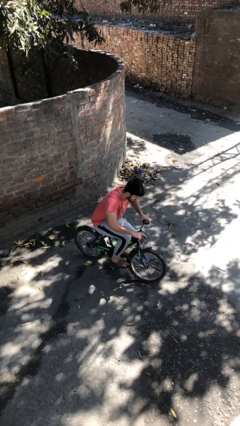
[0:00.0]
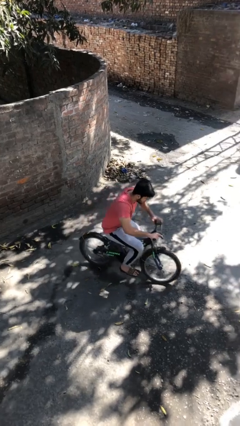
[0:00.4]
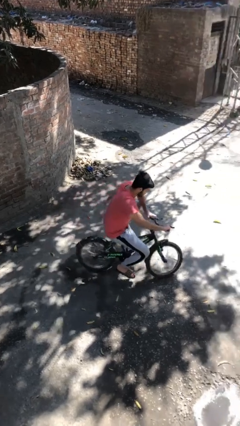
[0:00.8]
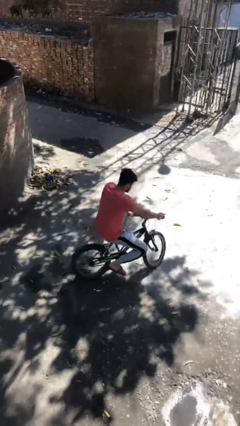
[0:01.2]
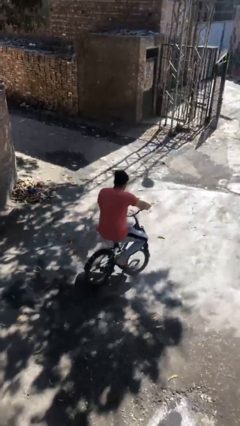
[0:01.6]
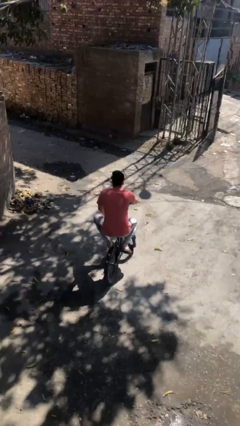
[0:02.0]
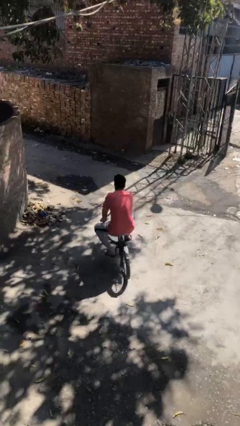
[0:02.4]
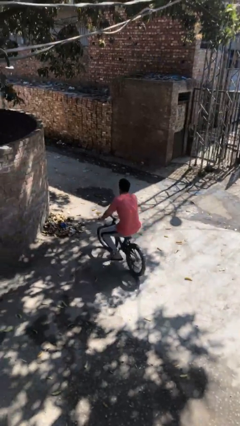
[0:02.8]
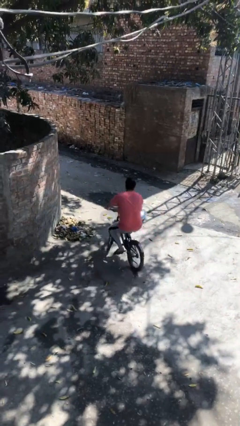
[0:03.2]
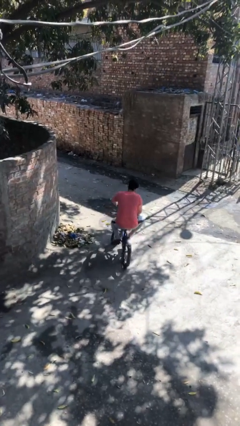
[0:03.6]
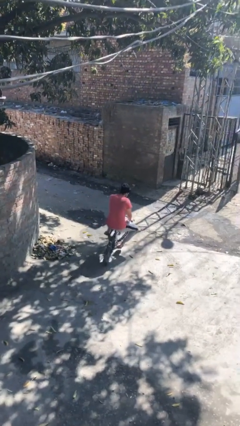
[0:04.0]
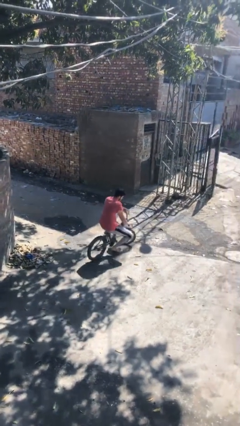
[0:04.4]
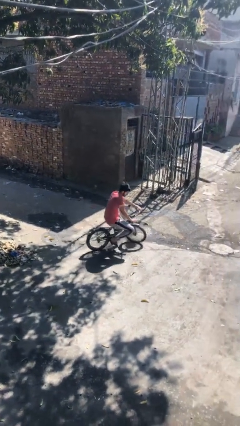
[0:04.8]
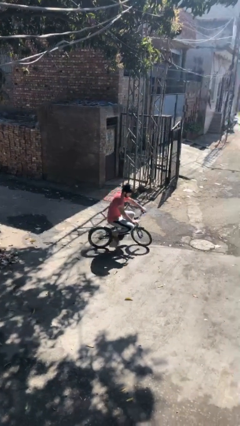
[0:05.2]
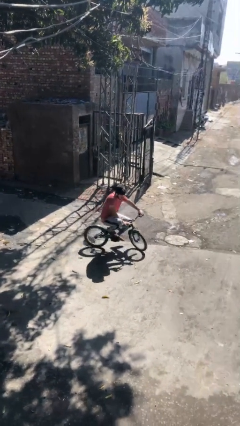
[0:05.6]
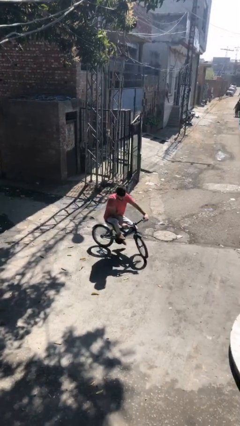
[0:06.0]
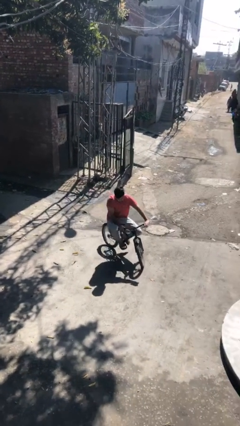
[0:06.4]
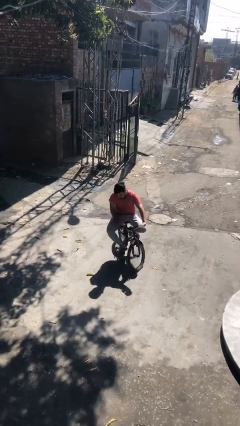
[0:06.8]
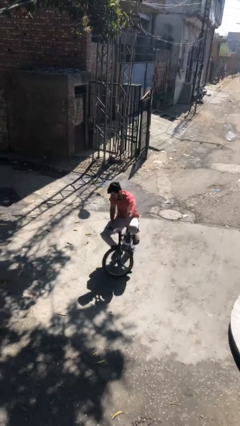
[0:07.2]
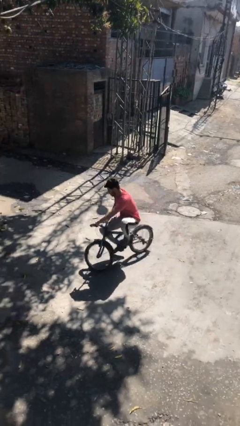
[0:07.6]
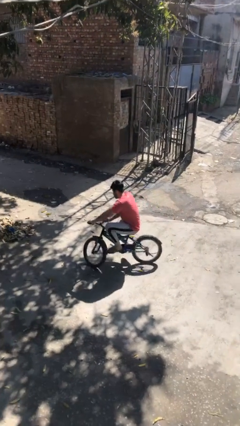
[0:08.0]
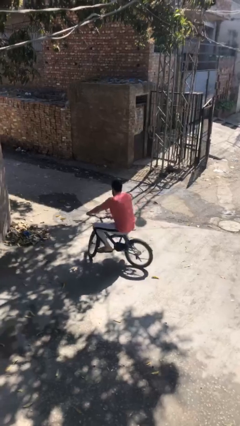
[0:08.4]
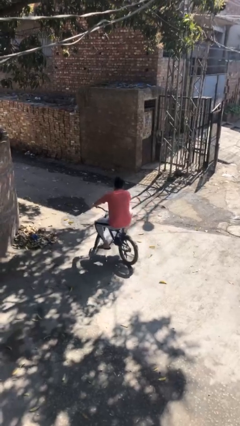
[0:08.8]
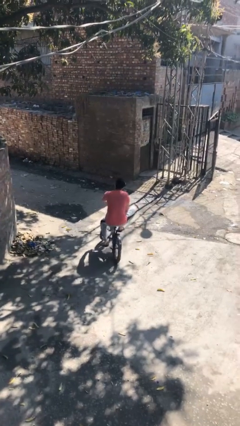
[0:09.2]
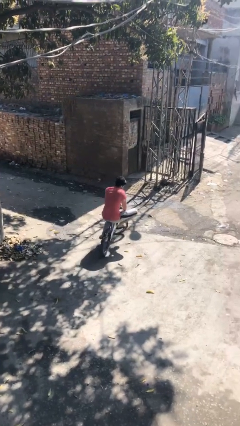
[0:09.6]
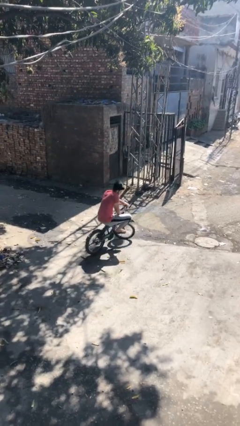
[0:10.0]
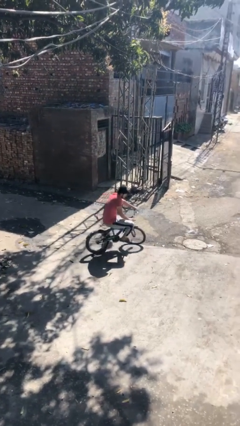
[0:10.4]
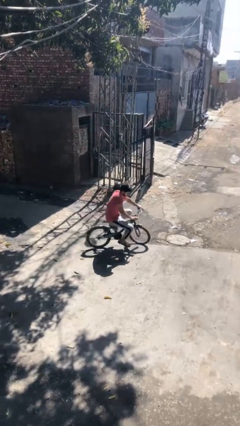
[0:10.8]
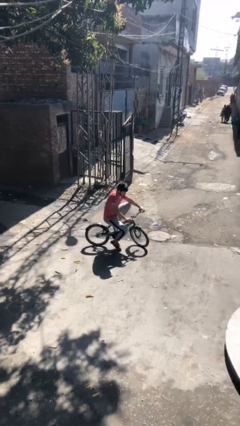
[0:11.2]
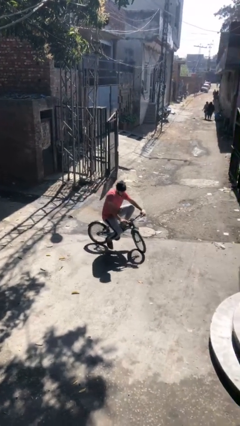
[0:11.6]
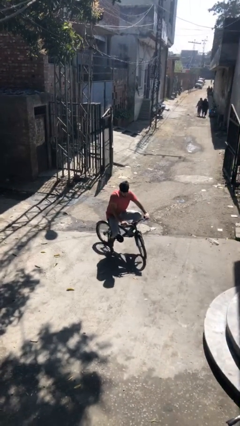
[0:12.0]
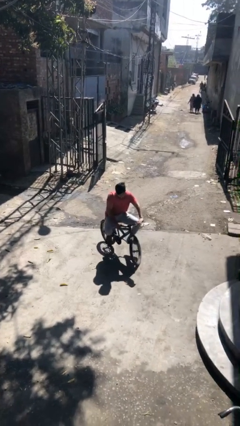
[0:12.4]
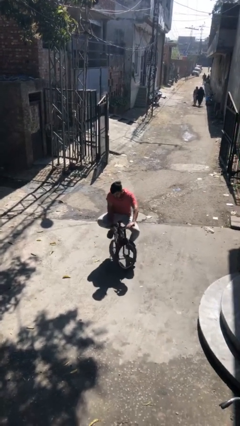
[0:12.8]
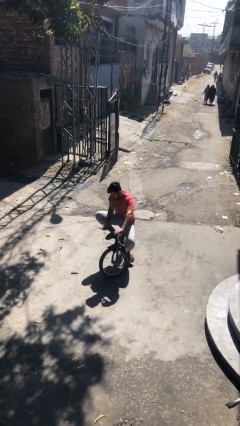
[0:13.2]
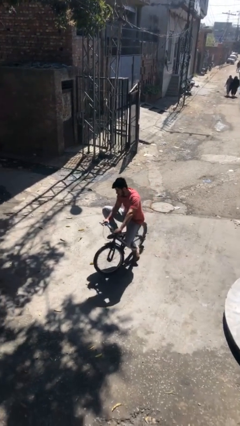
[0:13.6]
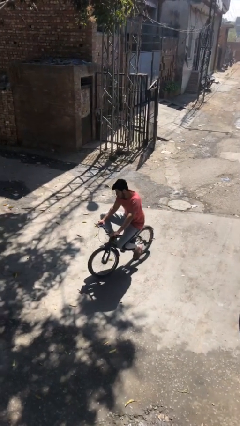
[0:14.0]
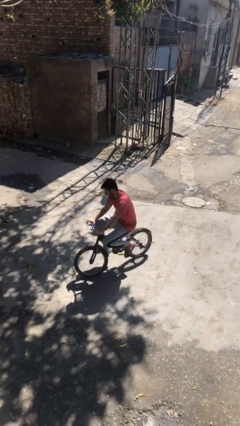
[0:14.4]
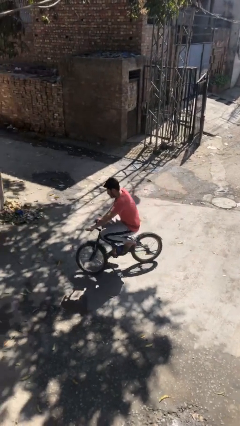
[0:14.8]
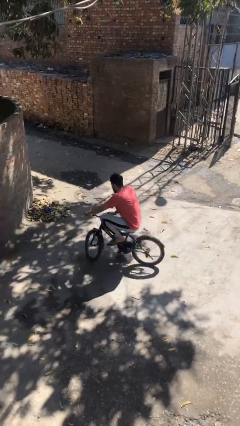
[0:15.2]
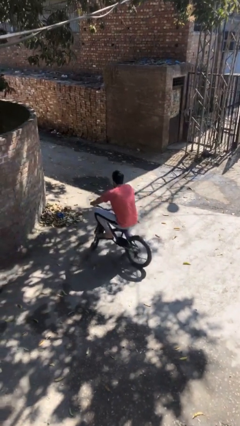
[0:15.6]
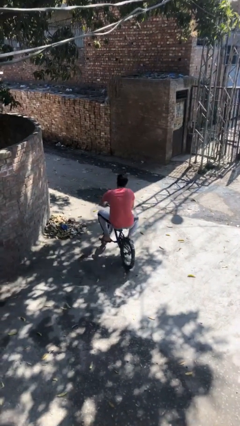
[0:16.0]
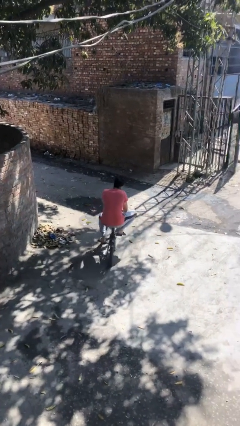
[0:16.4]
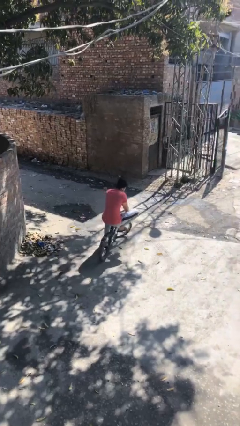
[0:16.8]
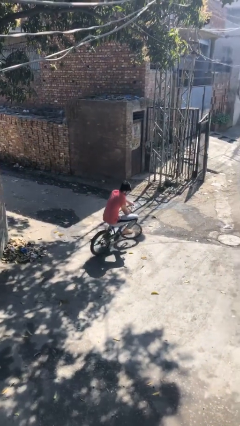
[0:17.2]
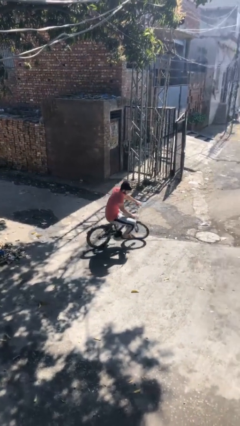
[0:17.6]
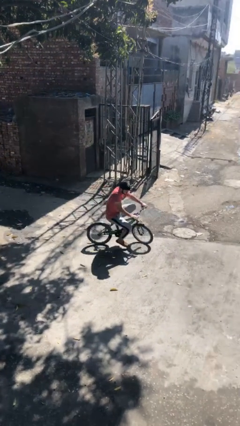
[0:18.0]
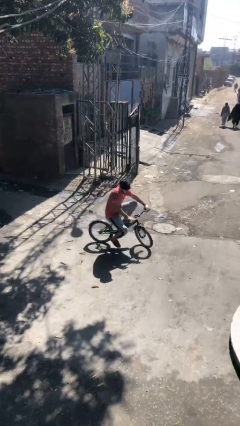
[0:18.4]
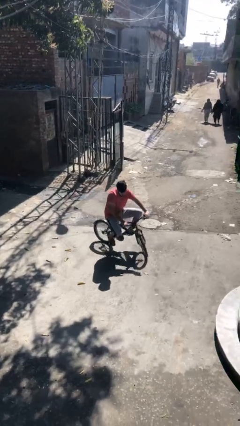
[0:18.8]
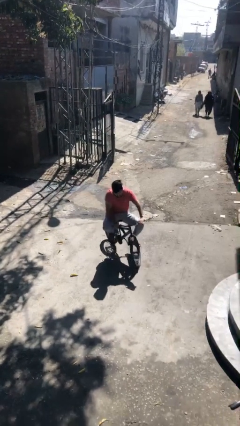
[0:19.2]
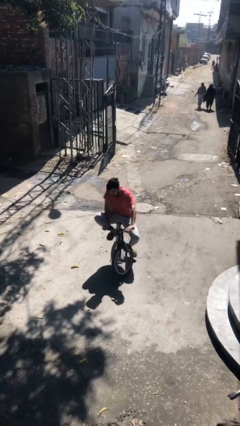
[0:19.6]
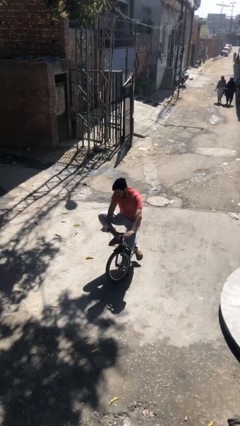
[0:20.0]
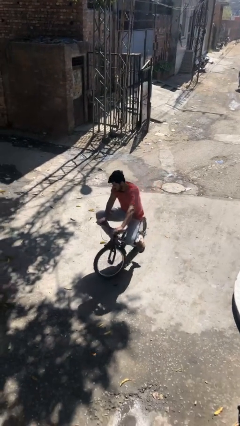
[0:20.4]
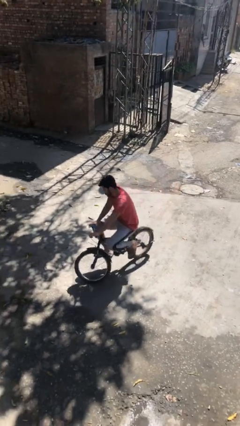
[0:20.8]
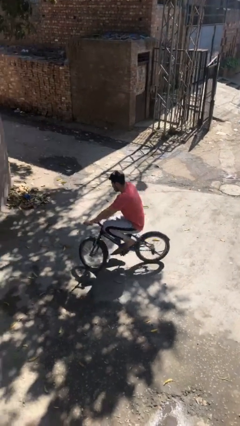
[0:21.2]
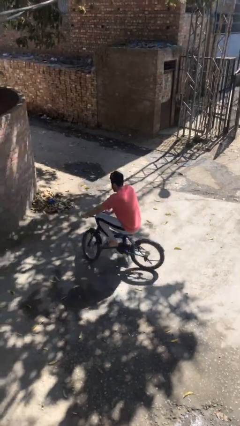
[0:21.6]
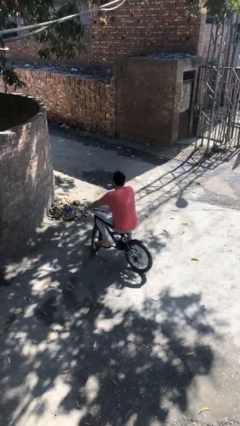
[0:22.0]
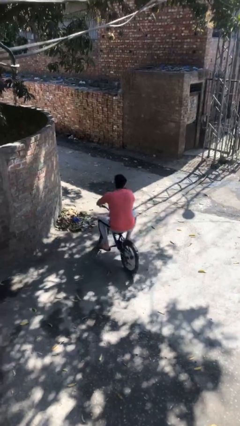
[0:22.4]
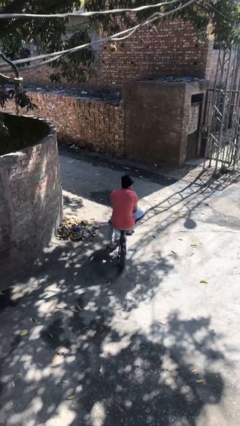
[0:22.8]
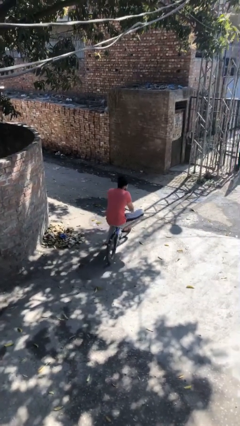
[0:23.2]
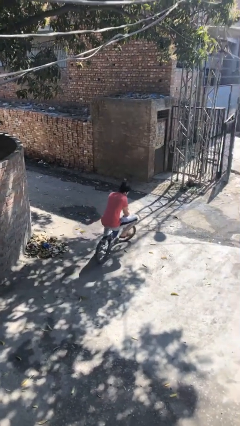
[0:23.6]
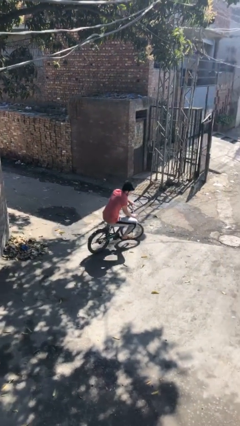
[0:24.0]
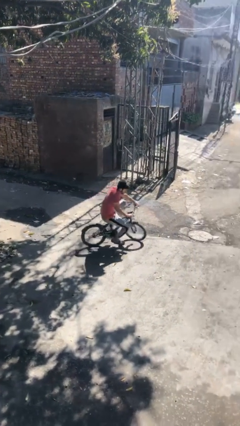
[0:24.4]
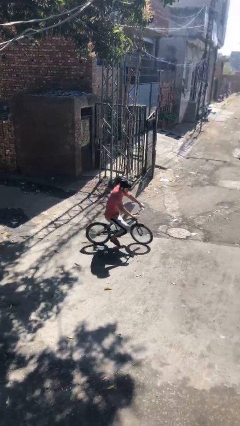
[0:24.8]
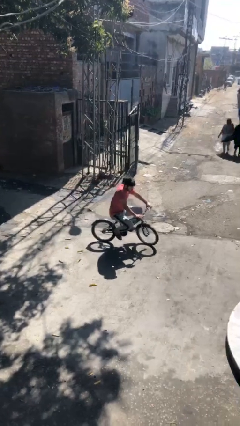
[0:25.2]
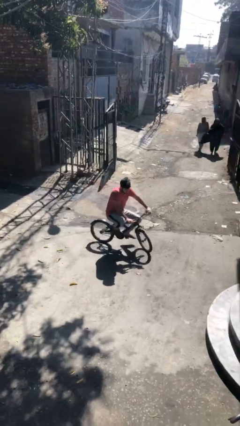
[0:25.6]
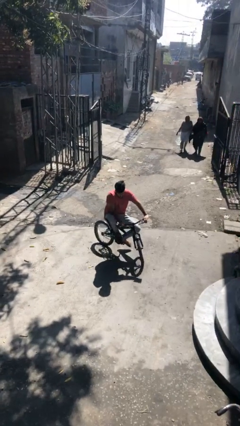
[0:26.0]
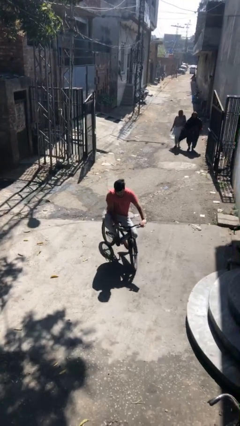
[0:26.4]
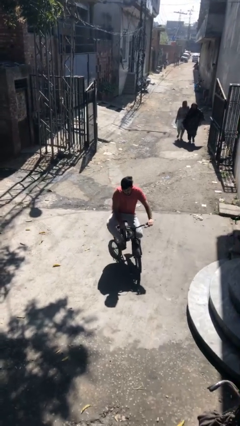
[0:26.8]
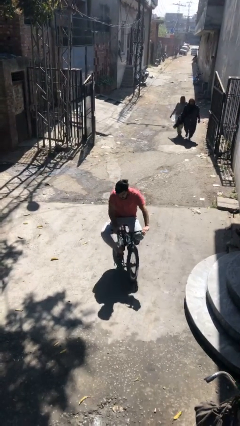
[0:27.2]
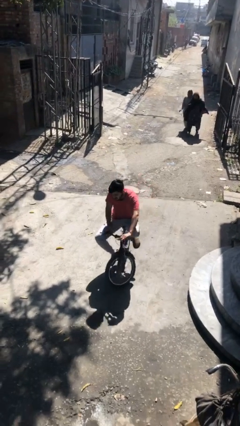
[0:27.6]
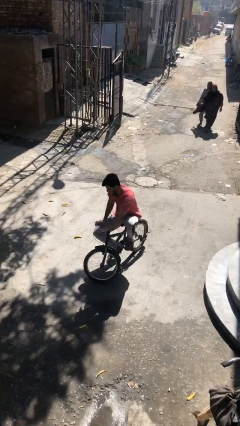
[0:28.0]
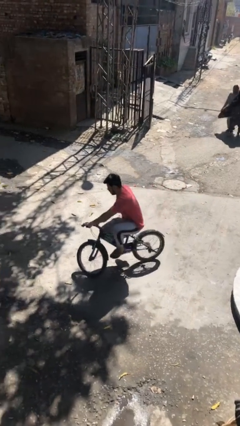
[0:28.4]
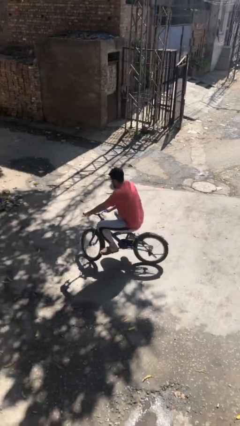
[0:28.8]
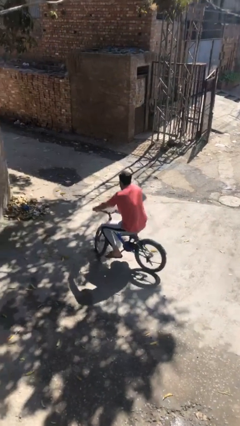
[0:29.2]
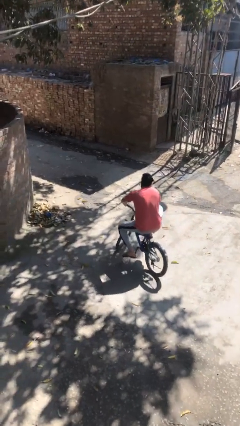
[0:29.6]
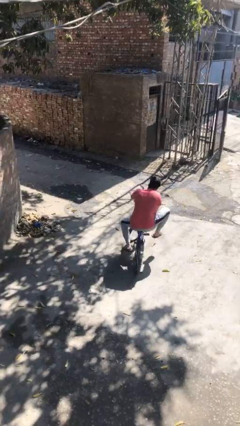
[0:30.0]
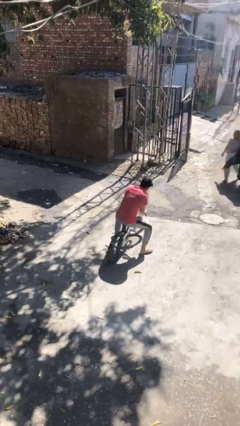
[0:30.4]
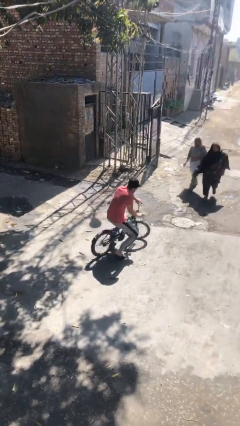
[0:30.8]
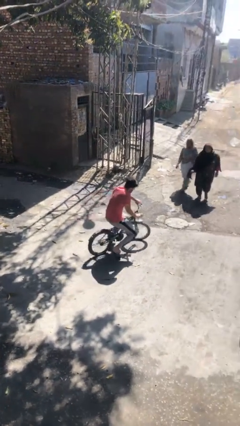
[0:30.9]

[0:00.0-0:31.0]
person rides bicycle

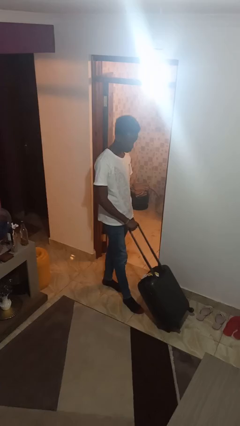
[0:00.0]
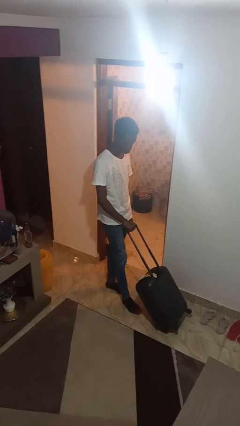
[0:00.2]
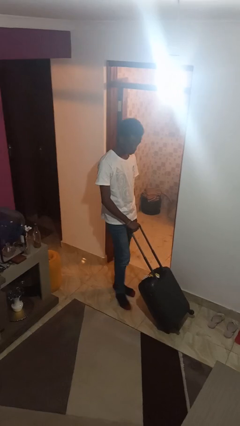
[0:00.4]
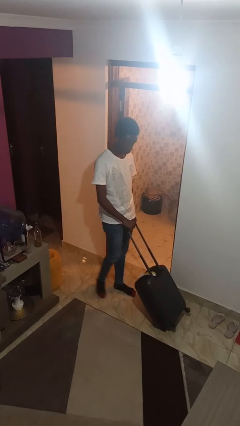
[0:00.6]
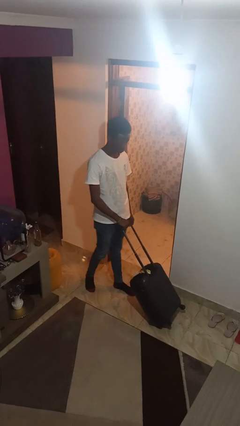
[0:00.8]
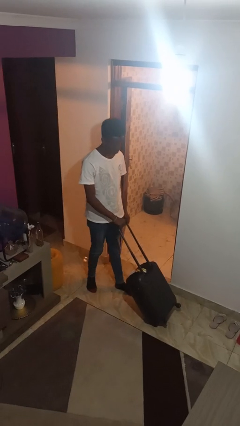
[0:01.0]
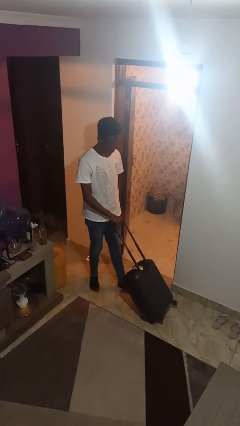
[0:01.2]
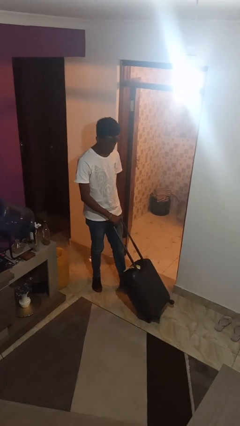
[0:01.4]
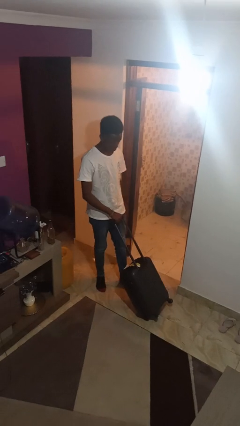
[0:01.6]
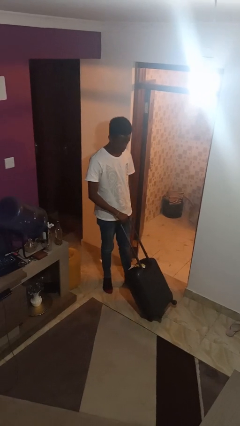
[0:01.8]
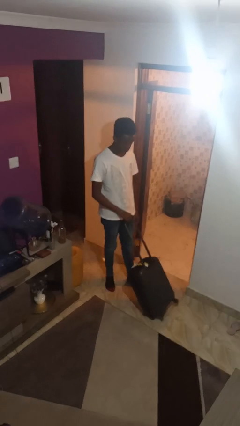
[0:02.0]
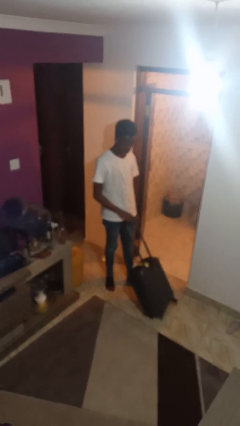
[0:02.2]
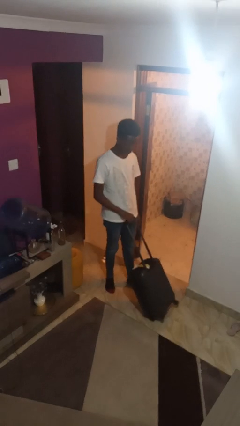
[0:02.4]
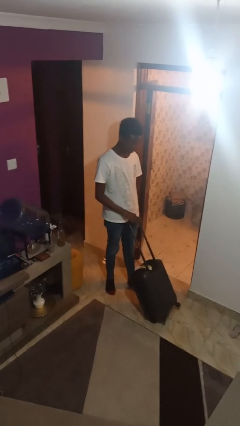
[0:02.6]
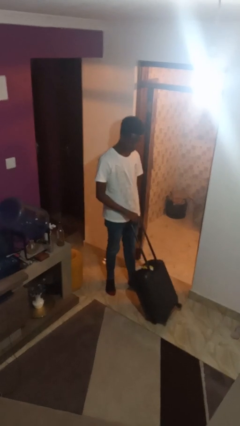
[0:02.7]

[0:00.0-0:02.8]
person pulls wheeled cart
